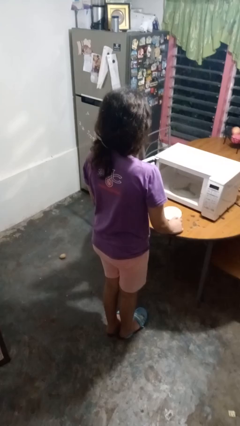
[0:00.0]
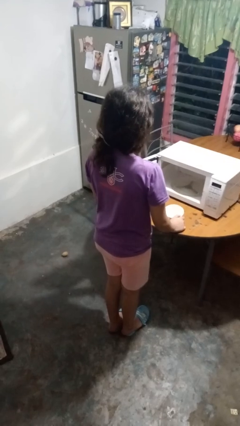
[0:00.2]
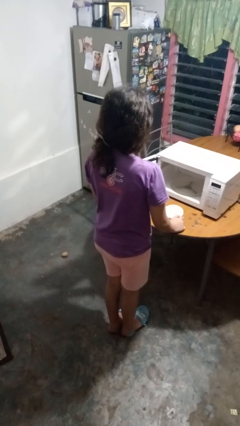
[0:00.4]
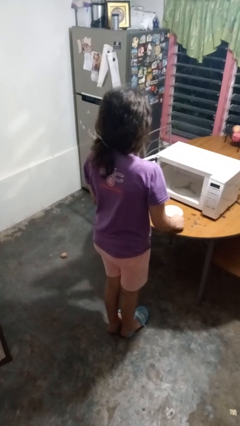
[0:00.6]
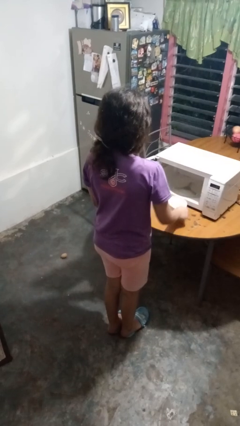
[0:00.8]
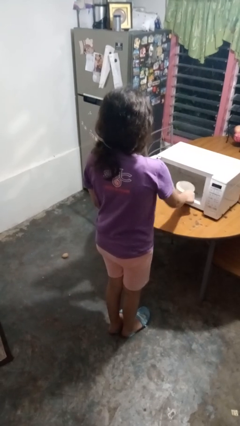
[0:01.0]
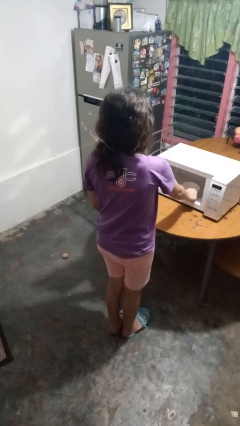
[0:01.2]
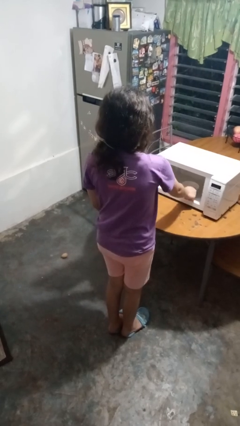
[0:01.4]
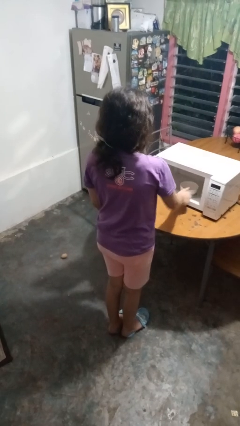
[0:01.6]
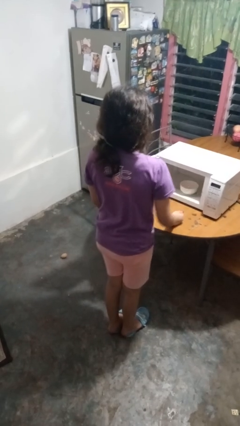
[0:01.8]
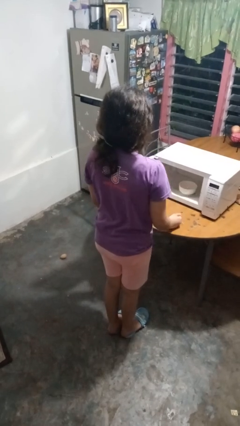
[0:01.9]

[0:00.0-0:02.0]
person puts object into microwave

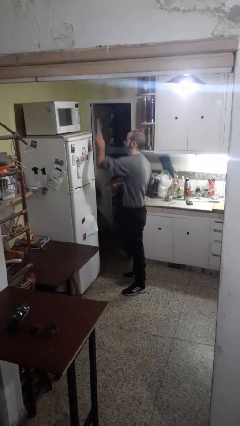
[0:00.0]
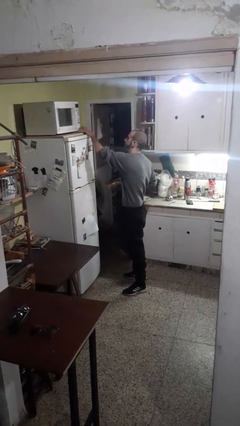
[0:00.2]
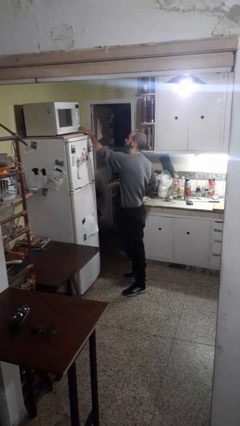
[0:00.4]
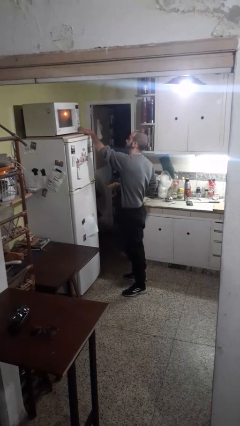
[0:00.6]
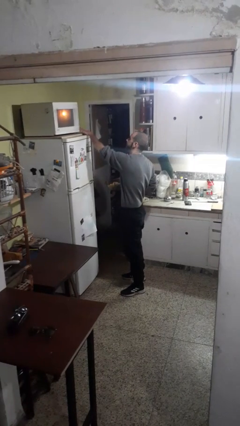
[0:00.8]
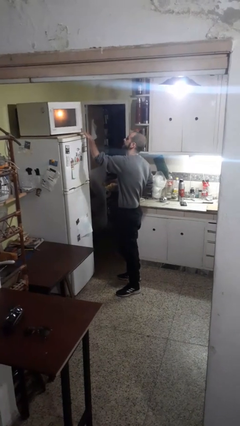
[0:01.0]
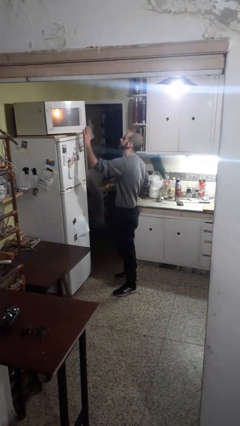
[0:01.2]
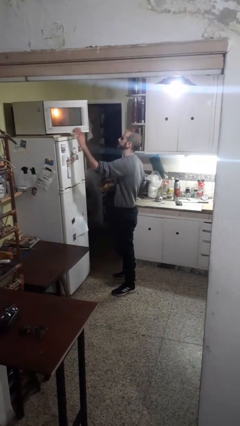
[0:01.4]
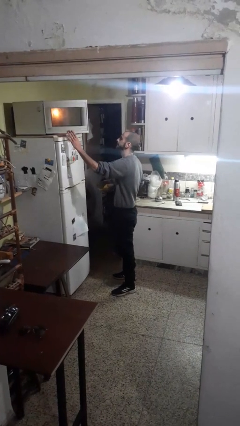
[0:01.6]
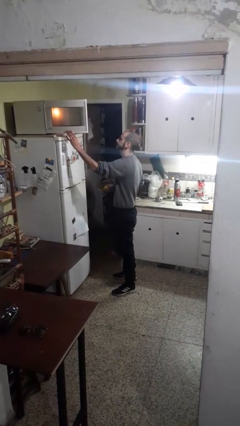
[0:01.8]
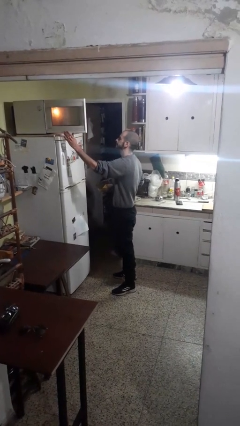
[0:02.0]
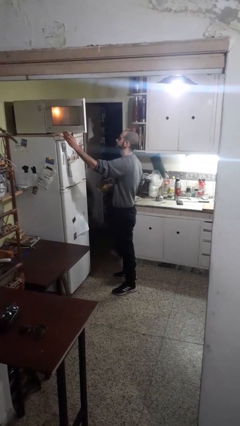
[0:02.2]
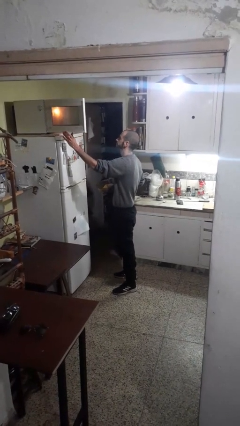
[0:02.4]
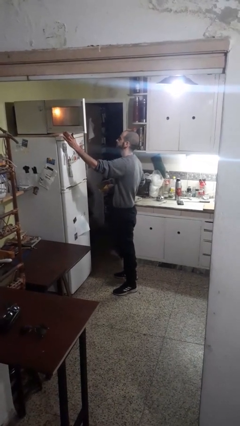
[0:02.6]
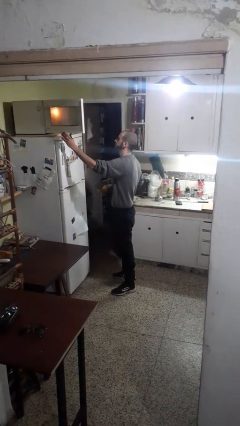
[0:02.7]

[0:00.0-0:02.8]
person opens microwave

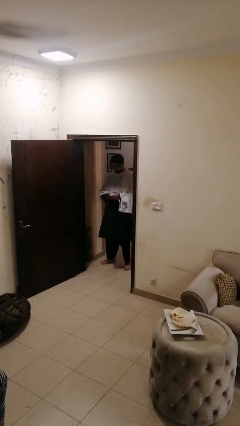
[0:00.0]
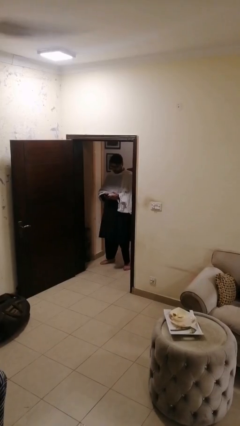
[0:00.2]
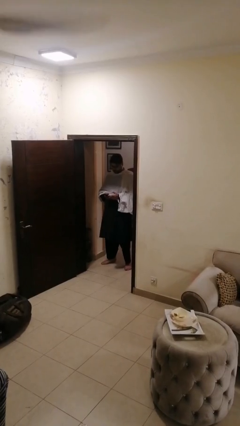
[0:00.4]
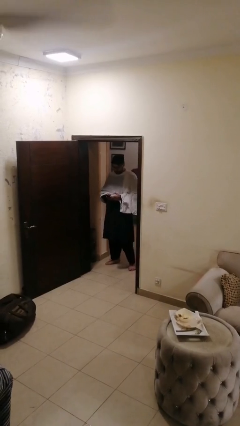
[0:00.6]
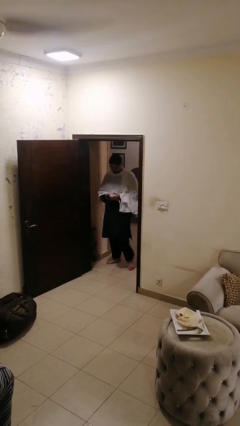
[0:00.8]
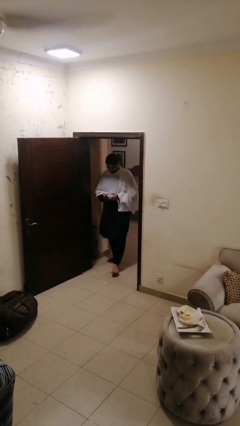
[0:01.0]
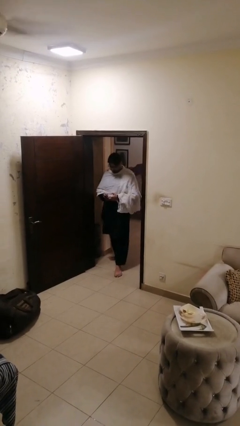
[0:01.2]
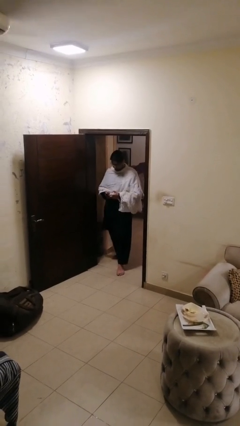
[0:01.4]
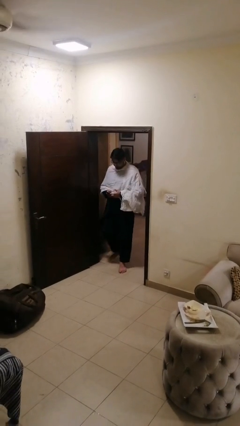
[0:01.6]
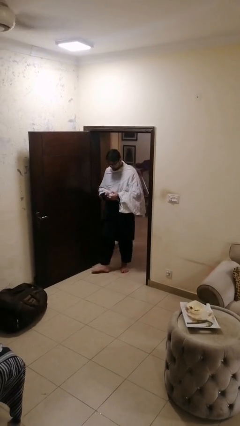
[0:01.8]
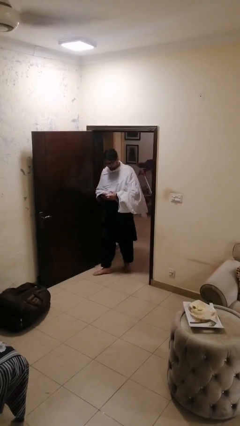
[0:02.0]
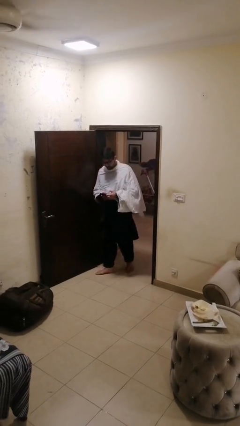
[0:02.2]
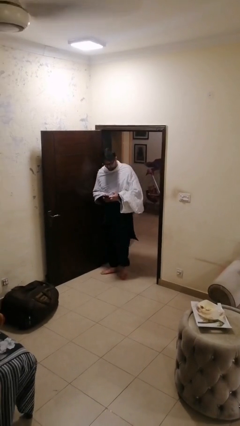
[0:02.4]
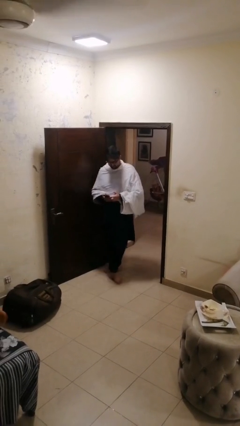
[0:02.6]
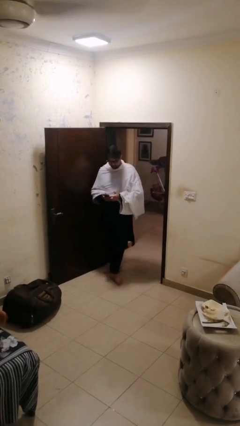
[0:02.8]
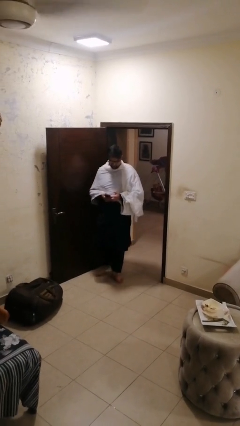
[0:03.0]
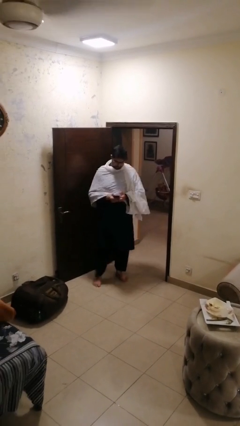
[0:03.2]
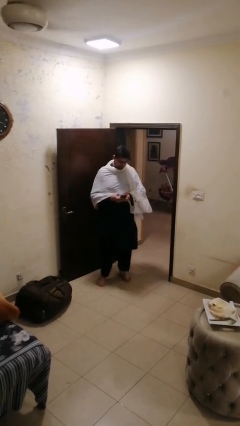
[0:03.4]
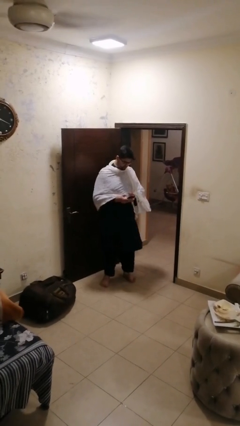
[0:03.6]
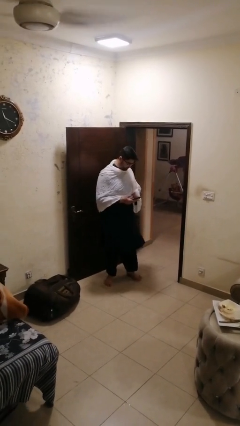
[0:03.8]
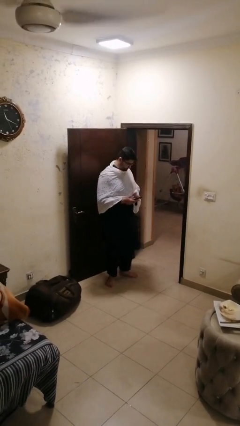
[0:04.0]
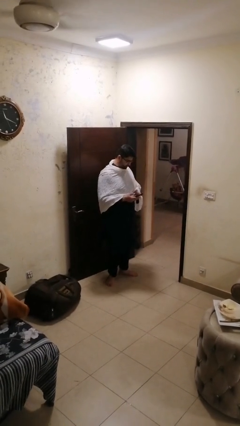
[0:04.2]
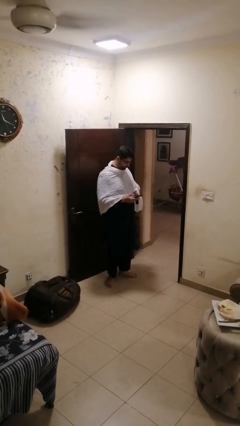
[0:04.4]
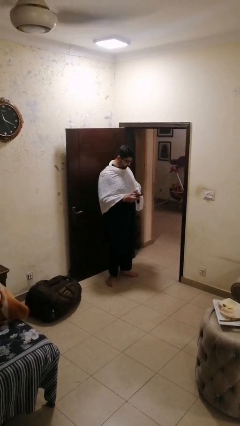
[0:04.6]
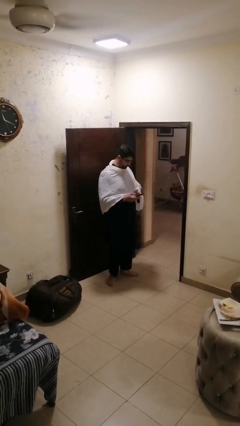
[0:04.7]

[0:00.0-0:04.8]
person enters scene through structure

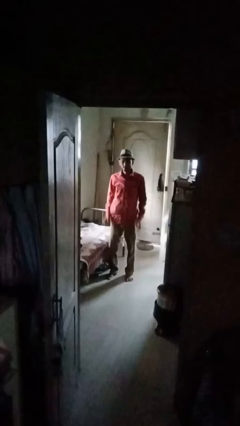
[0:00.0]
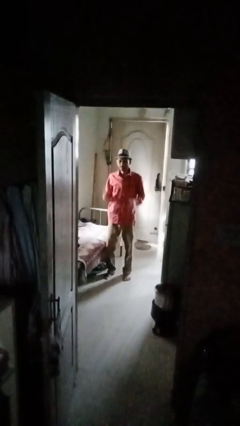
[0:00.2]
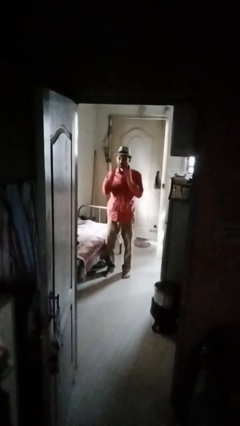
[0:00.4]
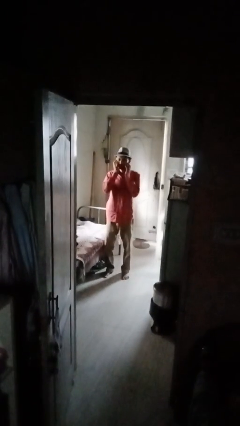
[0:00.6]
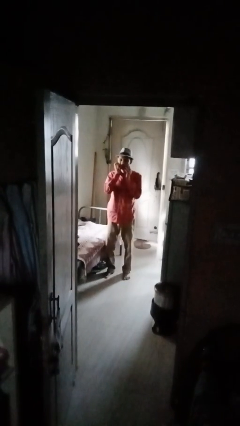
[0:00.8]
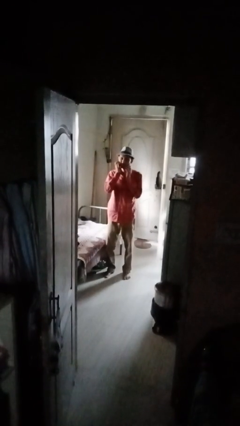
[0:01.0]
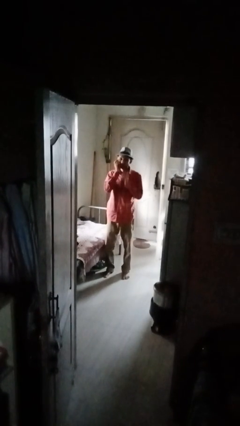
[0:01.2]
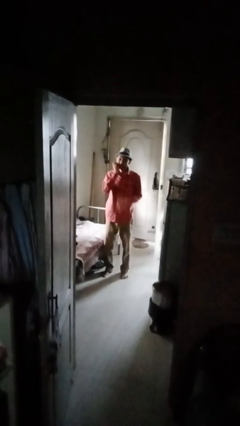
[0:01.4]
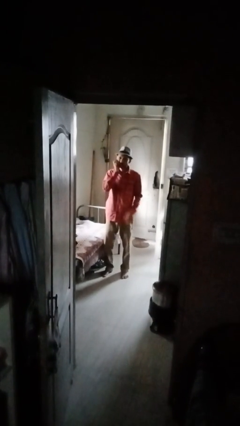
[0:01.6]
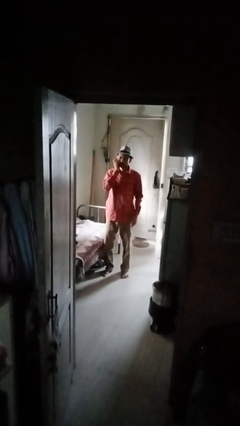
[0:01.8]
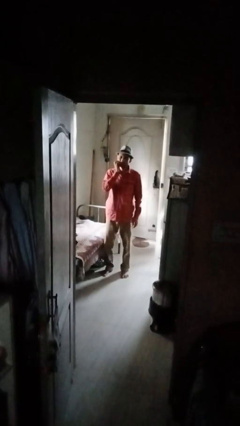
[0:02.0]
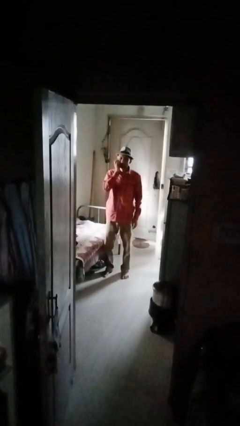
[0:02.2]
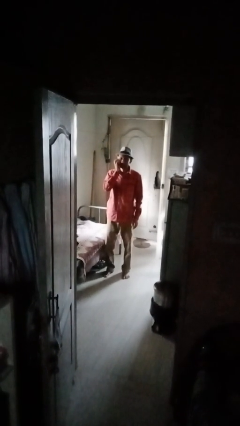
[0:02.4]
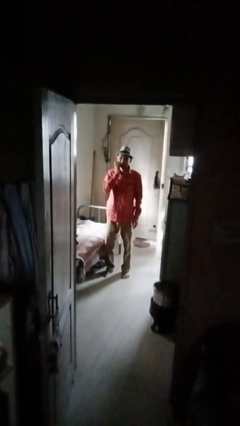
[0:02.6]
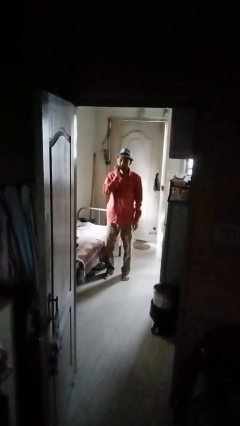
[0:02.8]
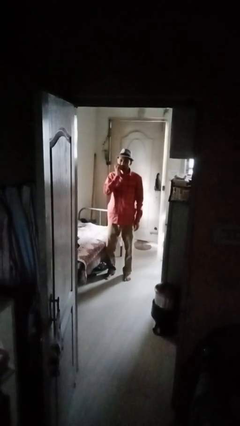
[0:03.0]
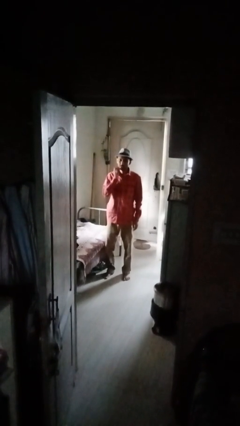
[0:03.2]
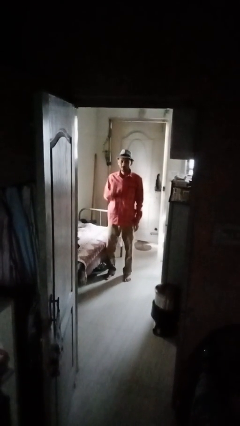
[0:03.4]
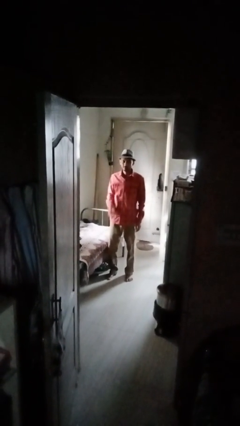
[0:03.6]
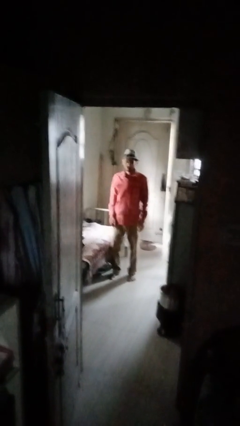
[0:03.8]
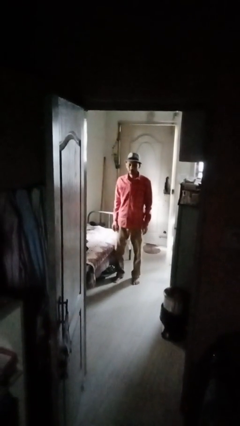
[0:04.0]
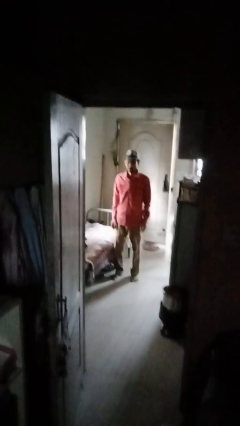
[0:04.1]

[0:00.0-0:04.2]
person scratches face

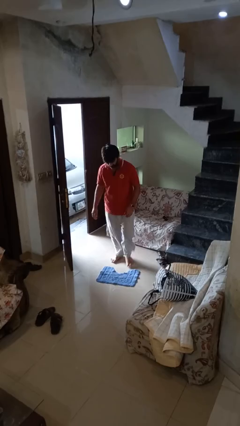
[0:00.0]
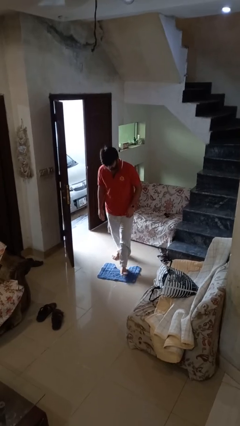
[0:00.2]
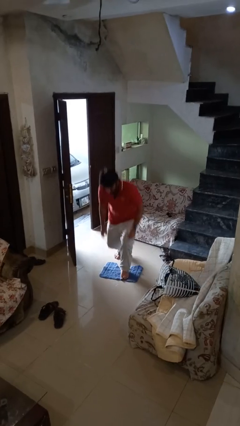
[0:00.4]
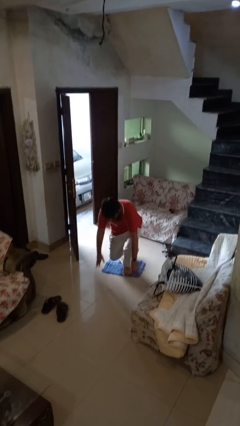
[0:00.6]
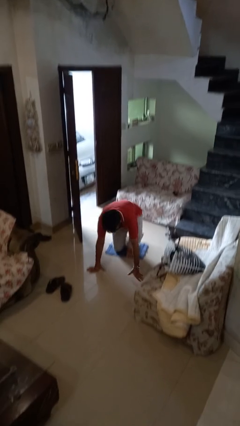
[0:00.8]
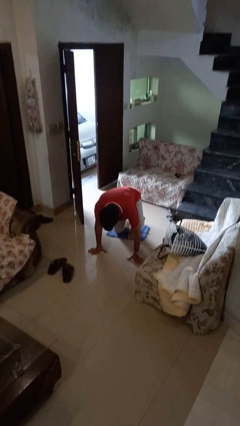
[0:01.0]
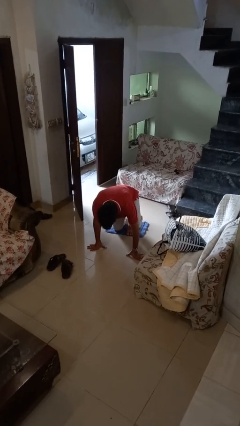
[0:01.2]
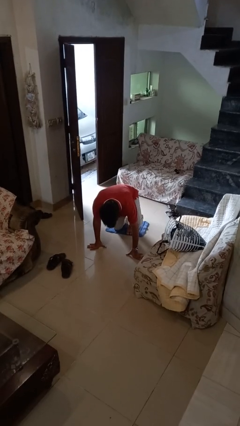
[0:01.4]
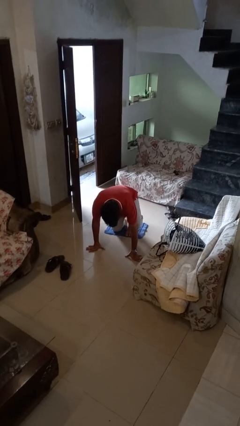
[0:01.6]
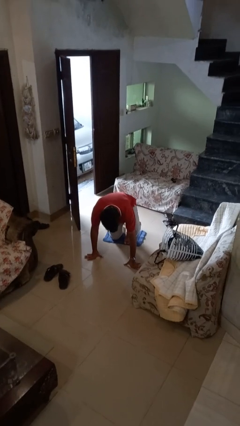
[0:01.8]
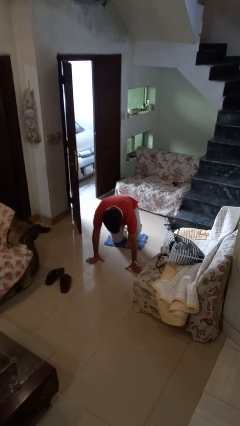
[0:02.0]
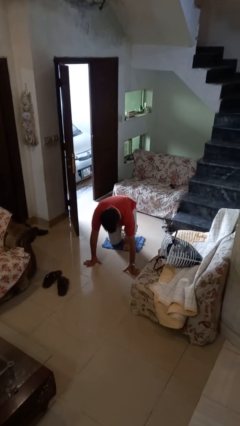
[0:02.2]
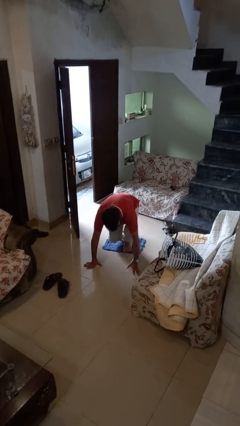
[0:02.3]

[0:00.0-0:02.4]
person trips on object on floor

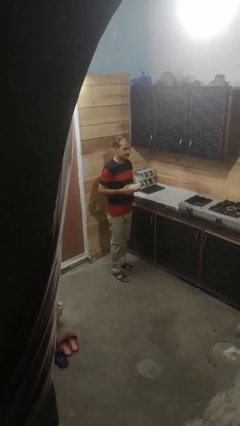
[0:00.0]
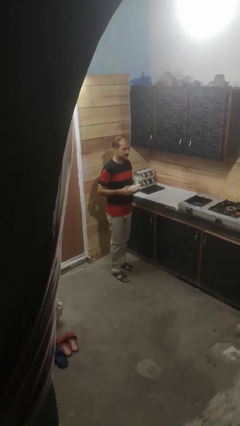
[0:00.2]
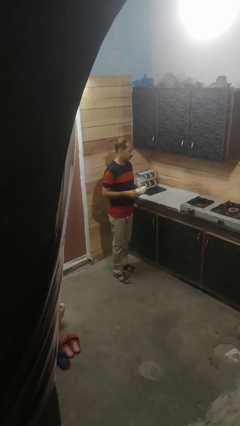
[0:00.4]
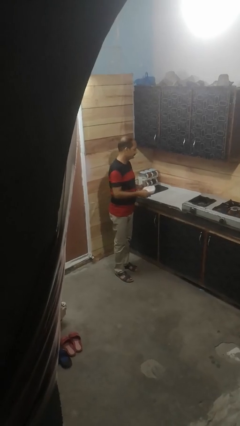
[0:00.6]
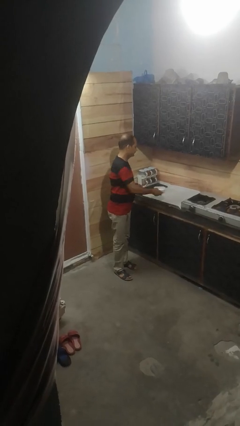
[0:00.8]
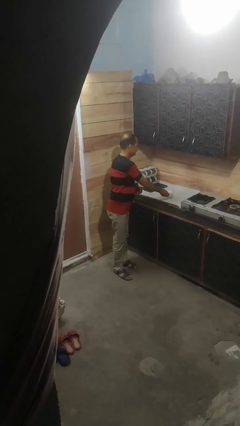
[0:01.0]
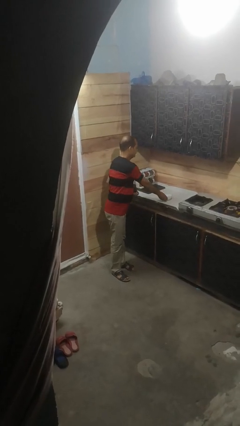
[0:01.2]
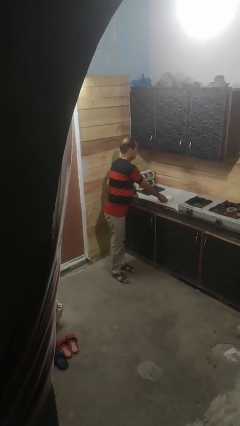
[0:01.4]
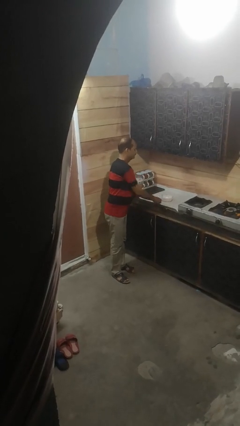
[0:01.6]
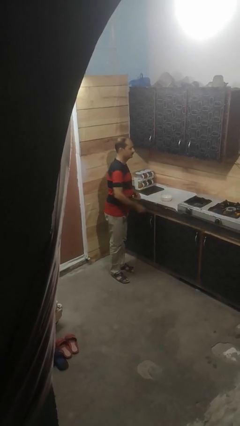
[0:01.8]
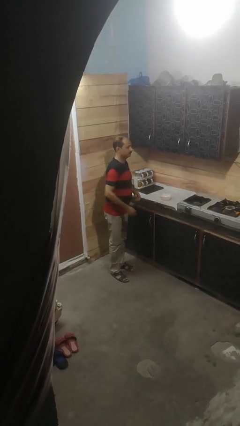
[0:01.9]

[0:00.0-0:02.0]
person puts down object on countertop
